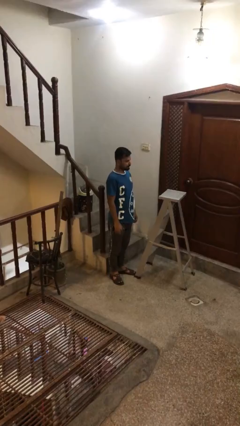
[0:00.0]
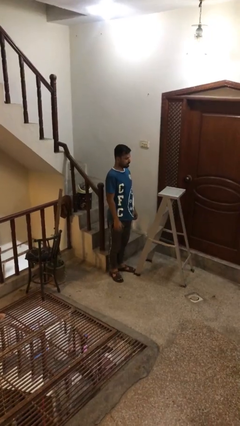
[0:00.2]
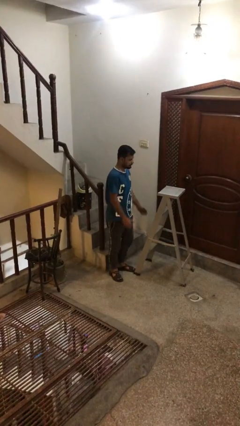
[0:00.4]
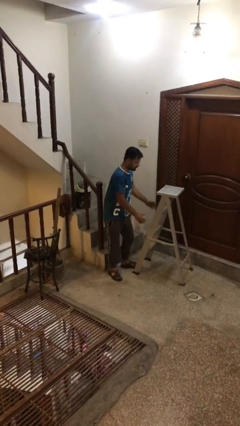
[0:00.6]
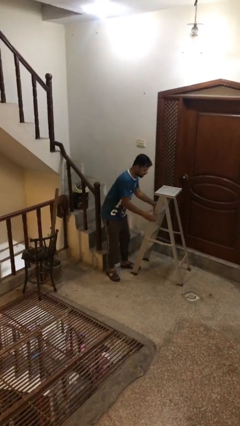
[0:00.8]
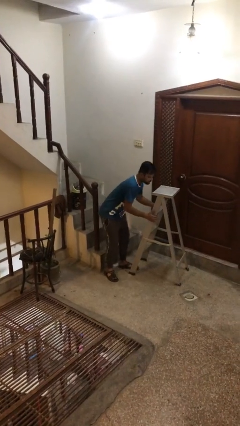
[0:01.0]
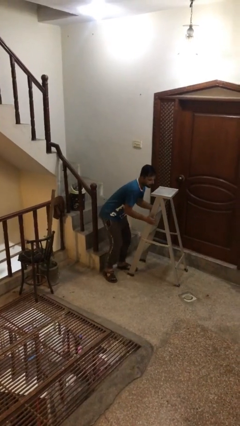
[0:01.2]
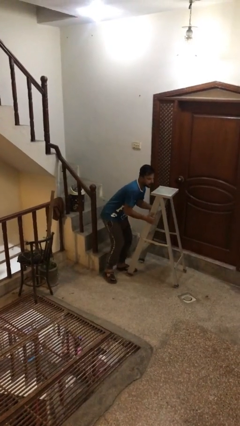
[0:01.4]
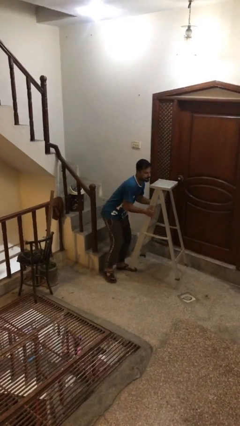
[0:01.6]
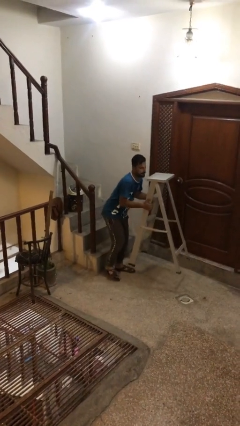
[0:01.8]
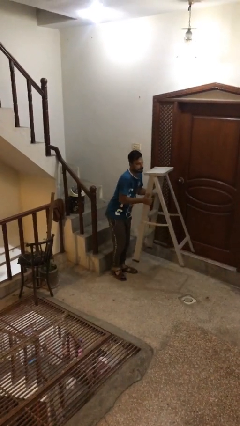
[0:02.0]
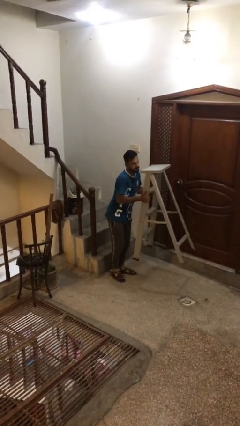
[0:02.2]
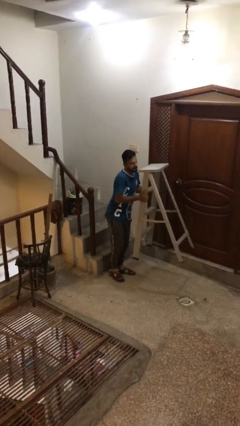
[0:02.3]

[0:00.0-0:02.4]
person picks up object from floor

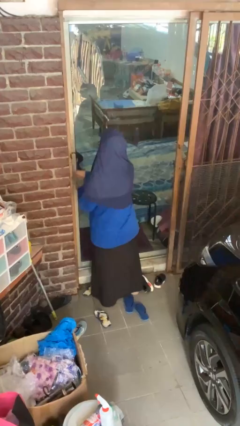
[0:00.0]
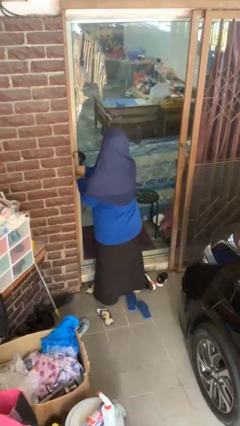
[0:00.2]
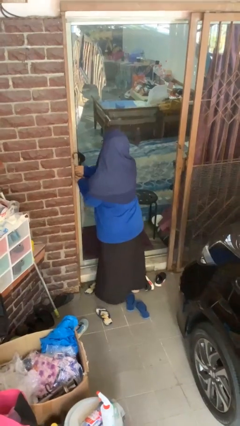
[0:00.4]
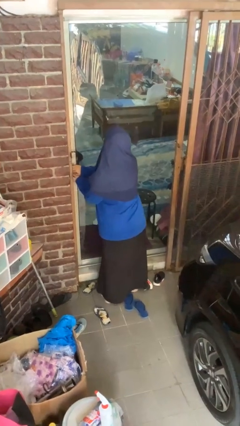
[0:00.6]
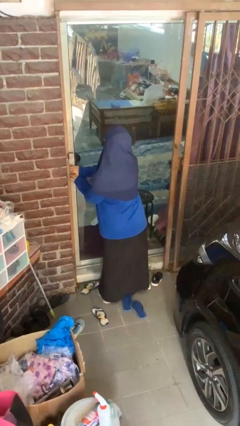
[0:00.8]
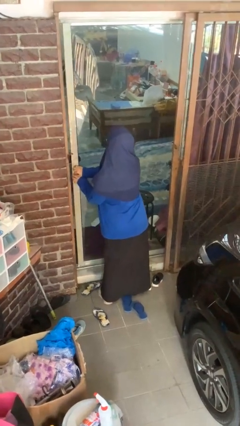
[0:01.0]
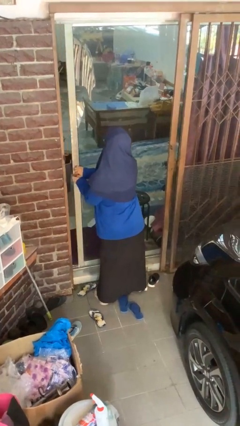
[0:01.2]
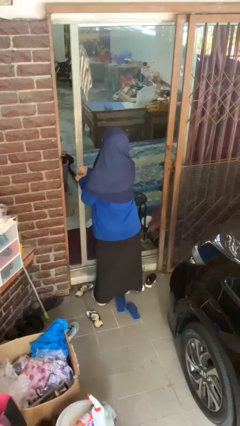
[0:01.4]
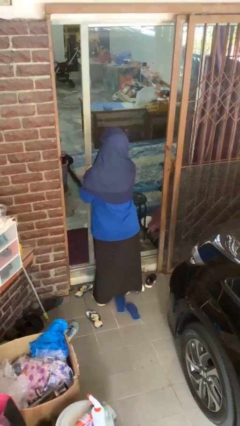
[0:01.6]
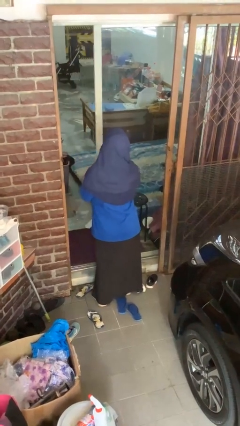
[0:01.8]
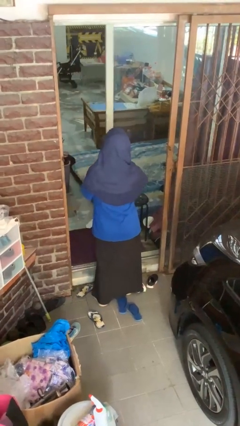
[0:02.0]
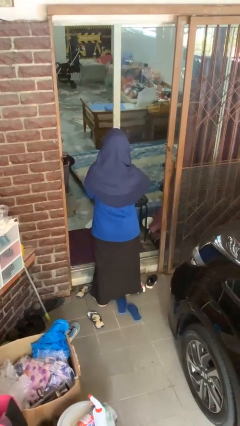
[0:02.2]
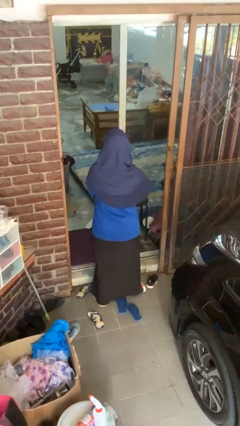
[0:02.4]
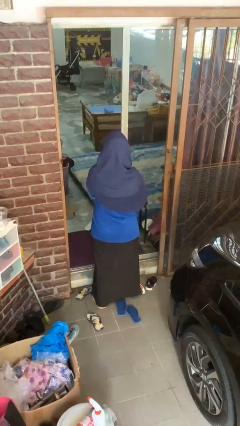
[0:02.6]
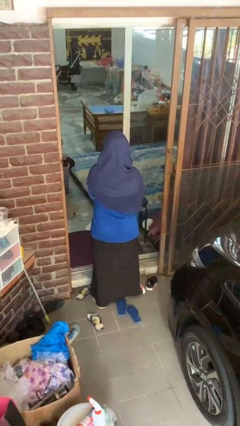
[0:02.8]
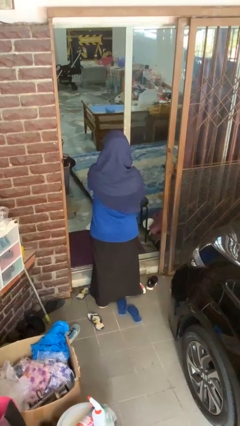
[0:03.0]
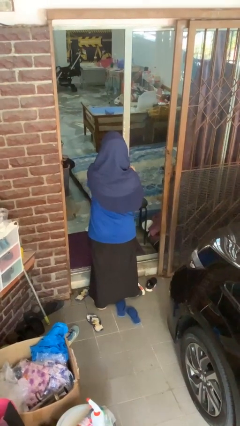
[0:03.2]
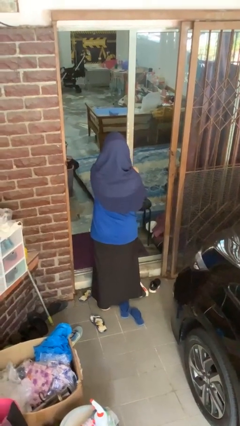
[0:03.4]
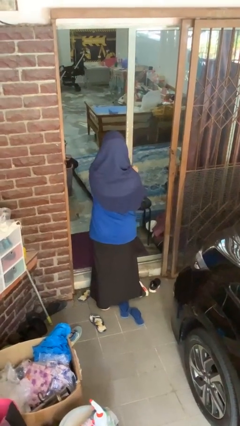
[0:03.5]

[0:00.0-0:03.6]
person opens sliding door

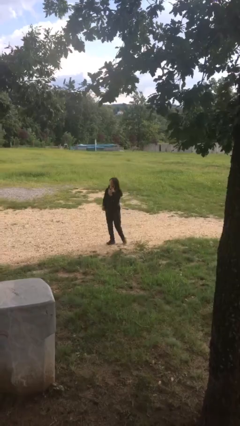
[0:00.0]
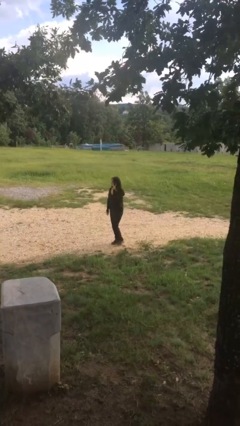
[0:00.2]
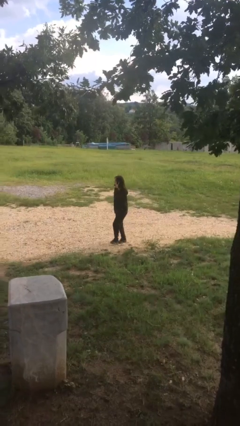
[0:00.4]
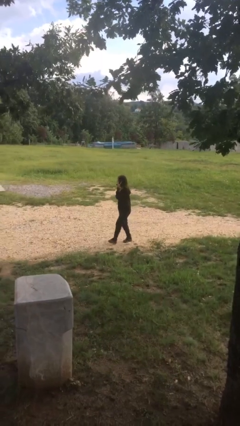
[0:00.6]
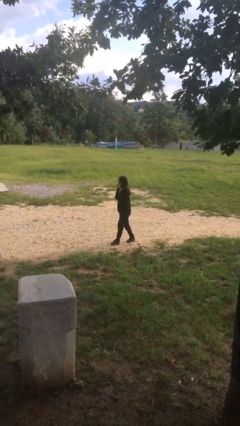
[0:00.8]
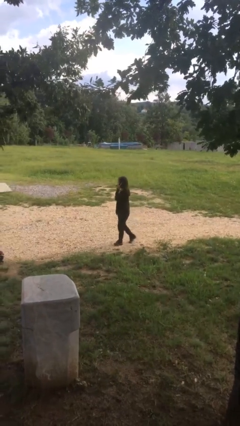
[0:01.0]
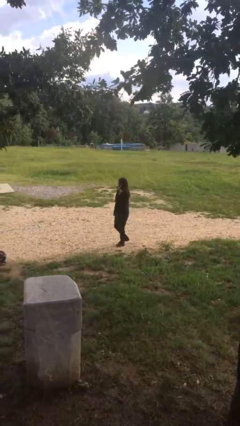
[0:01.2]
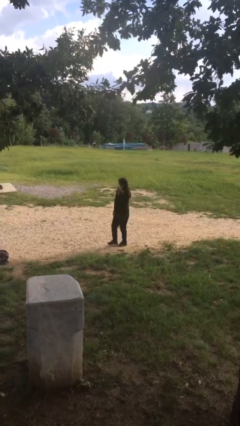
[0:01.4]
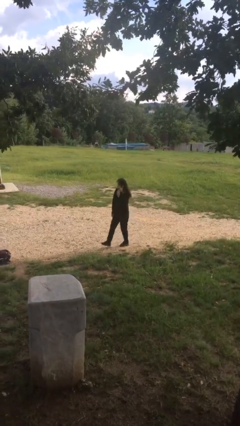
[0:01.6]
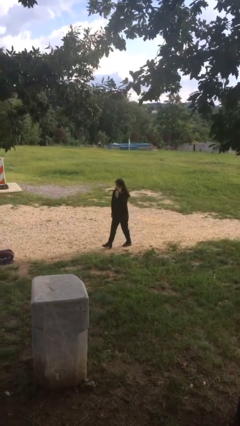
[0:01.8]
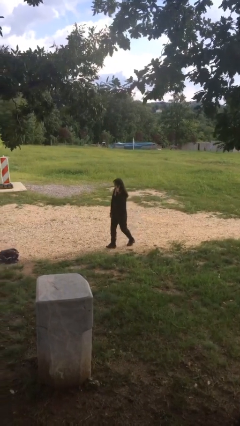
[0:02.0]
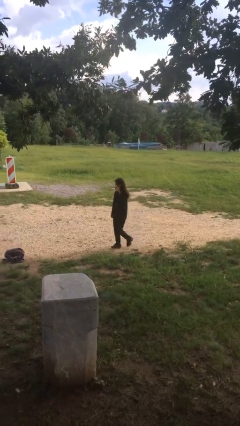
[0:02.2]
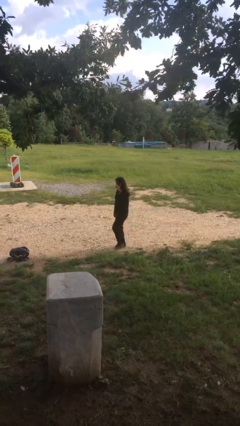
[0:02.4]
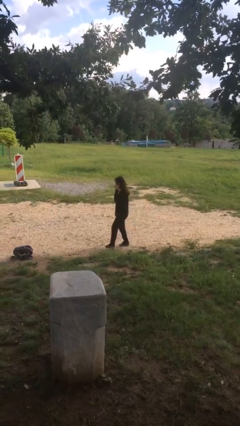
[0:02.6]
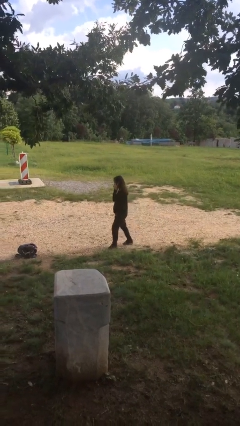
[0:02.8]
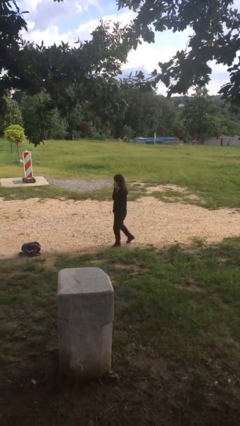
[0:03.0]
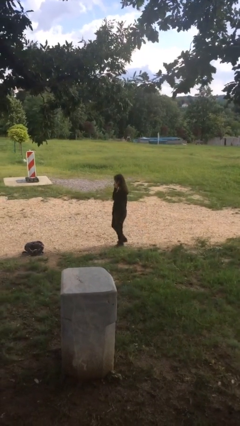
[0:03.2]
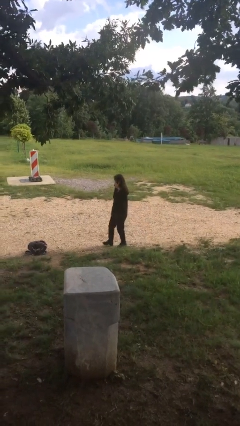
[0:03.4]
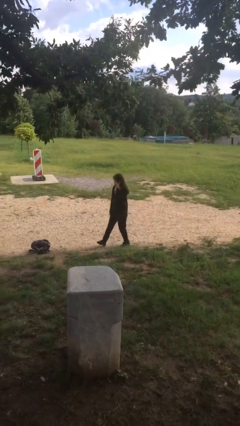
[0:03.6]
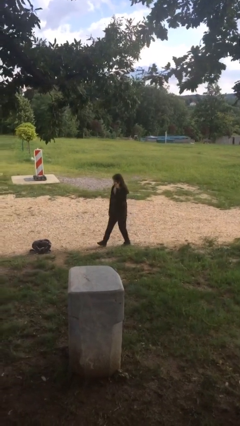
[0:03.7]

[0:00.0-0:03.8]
person talks on phone

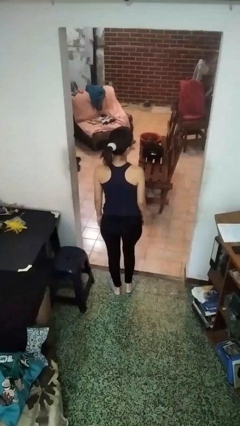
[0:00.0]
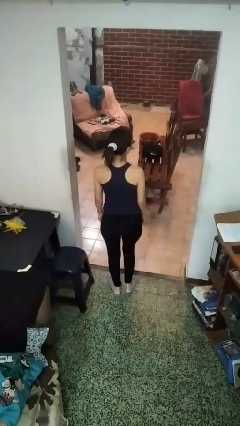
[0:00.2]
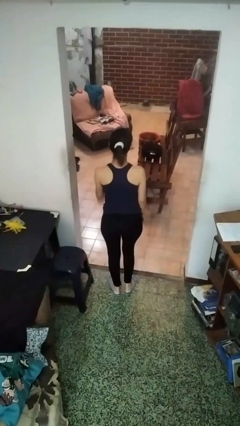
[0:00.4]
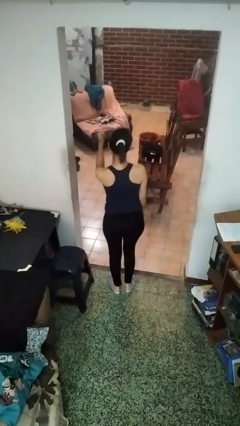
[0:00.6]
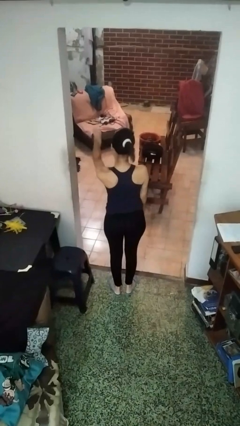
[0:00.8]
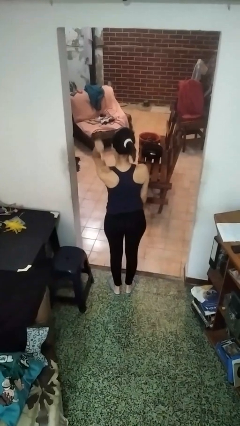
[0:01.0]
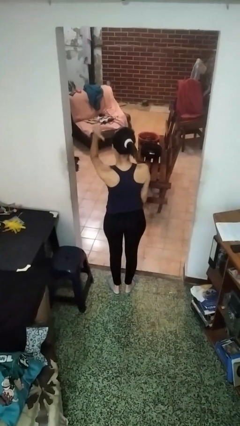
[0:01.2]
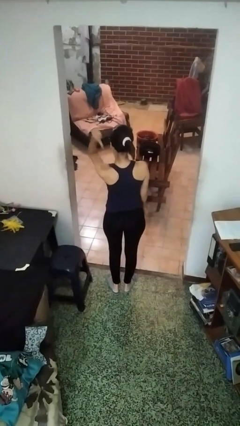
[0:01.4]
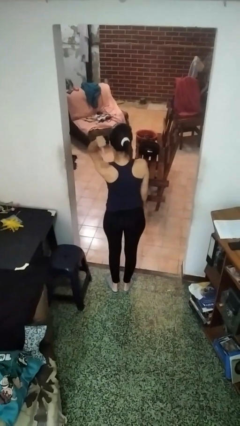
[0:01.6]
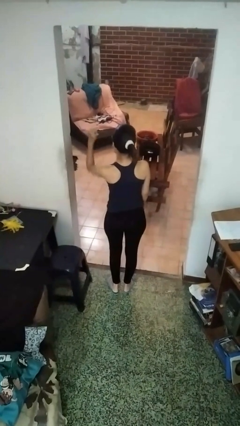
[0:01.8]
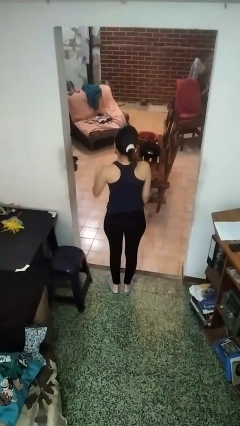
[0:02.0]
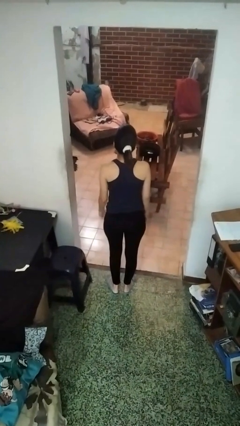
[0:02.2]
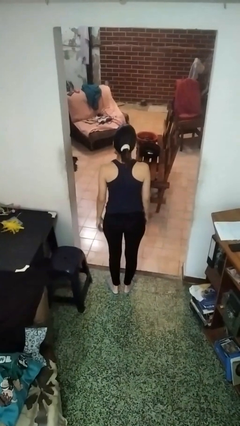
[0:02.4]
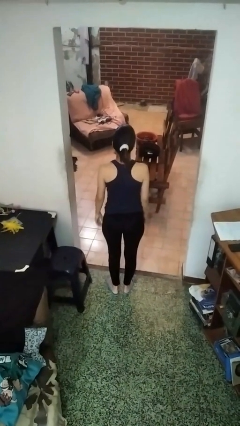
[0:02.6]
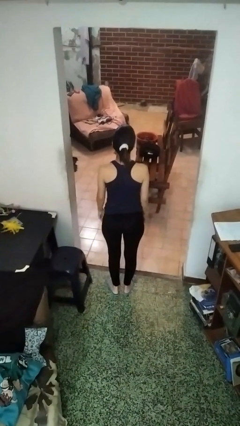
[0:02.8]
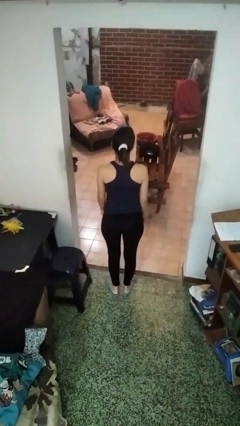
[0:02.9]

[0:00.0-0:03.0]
person gestures behind me

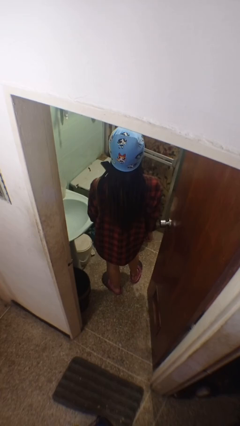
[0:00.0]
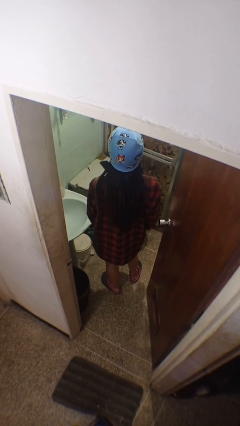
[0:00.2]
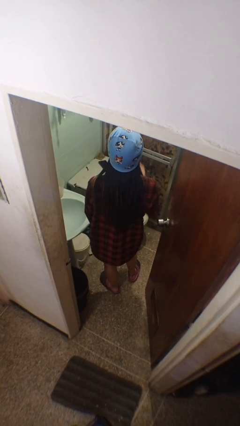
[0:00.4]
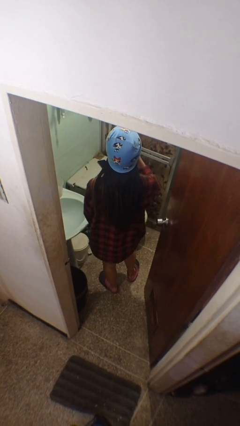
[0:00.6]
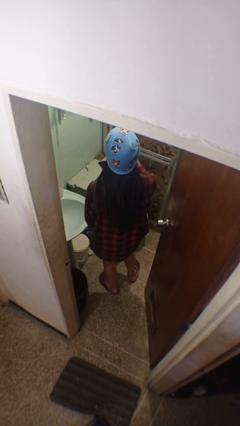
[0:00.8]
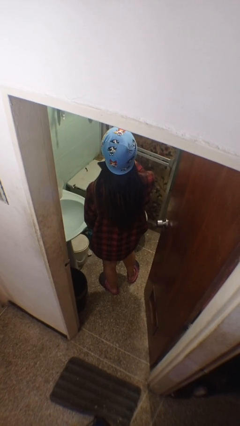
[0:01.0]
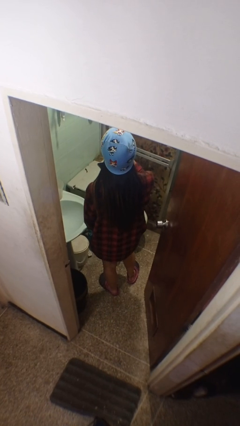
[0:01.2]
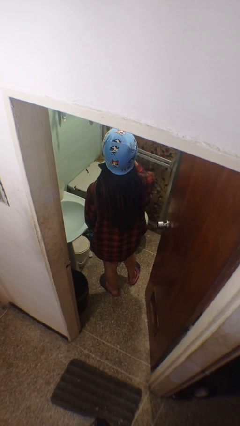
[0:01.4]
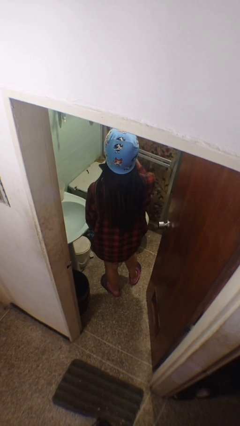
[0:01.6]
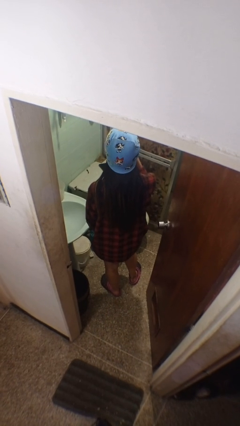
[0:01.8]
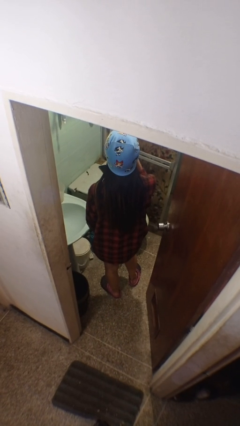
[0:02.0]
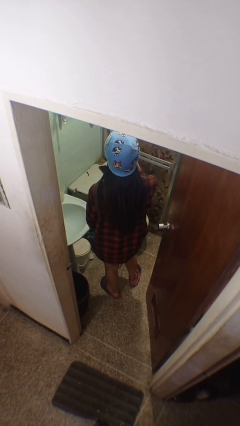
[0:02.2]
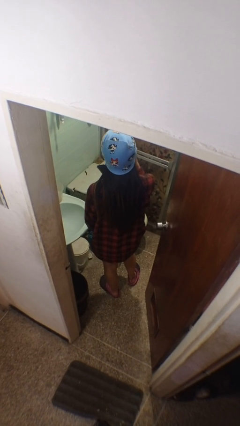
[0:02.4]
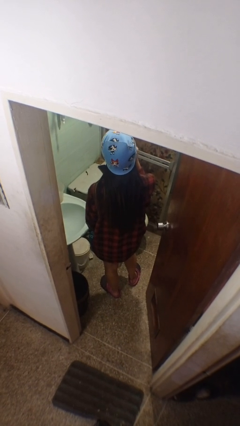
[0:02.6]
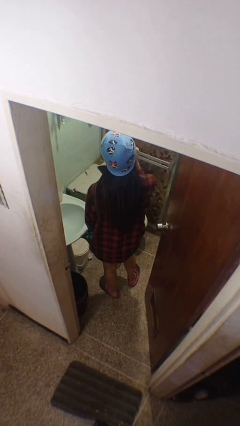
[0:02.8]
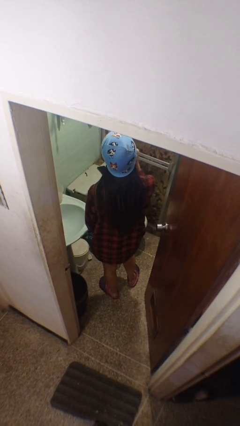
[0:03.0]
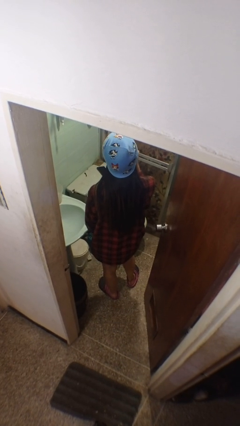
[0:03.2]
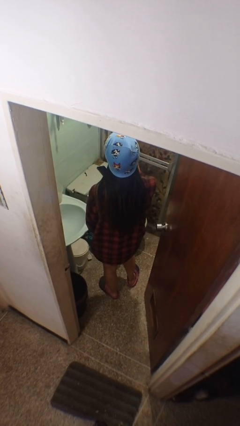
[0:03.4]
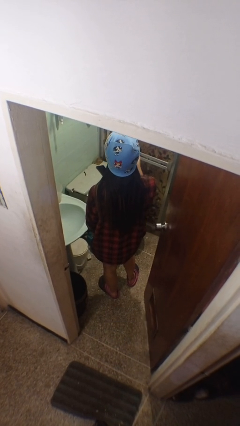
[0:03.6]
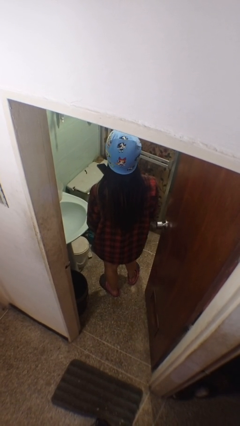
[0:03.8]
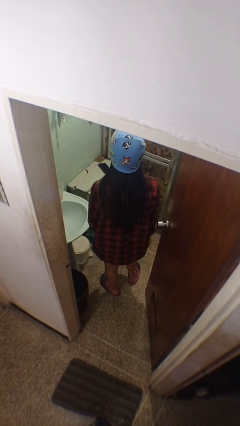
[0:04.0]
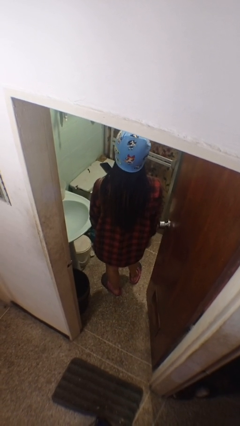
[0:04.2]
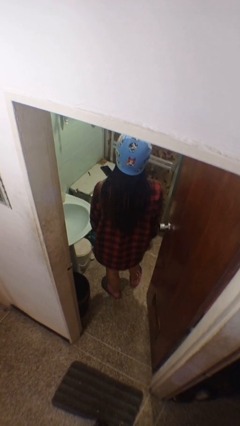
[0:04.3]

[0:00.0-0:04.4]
person brushes teeth
